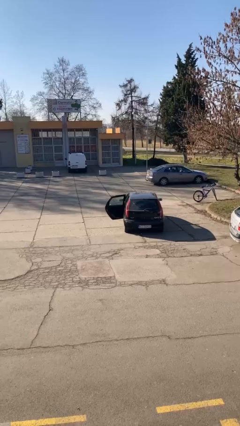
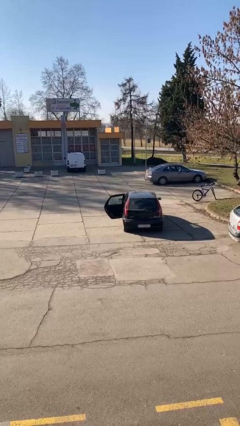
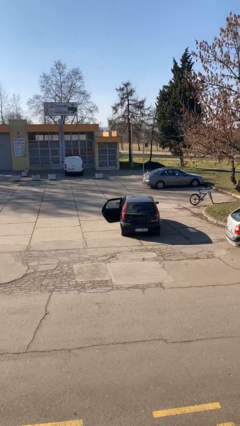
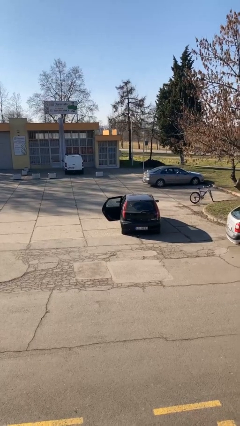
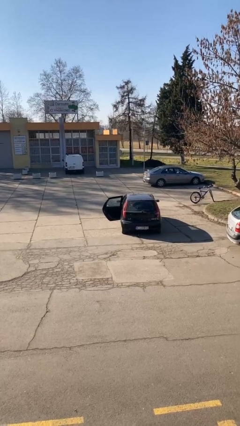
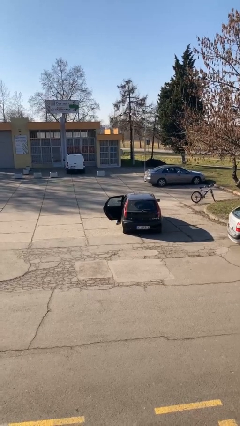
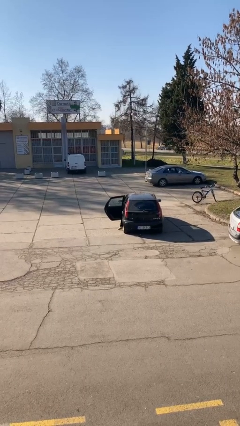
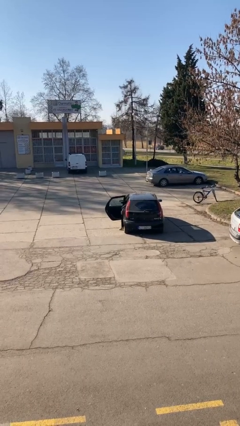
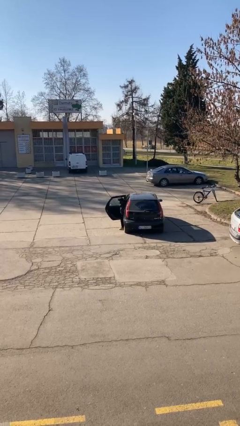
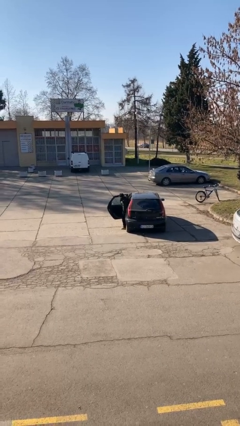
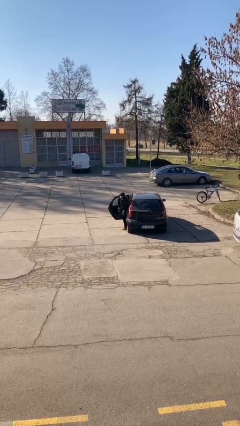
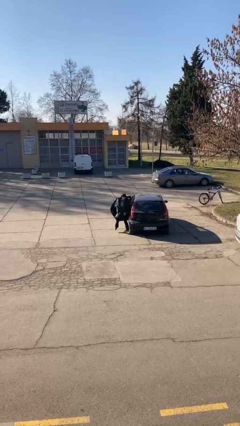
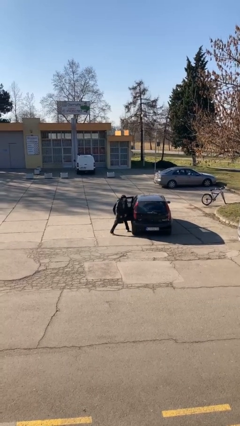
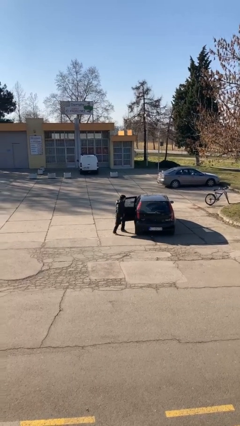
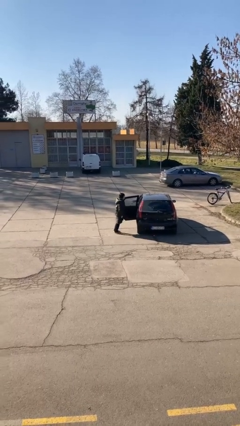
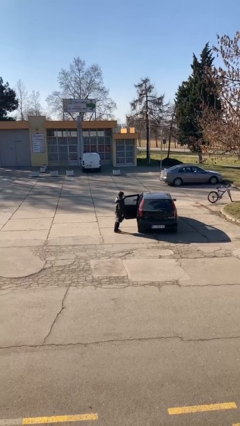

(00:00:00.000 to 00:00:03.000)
person exits car

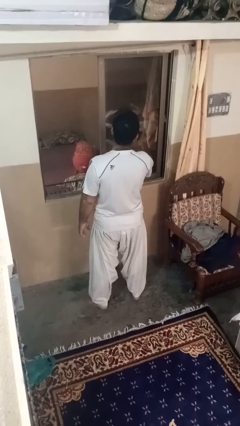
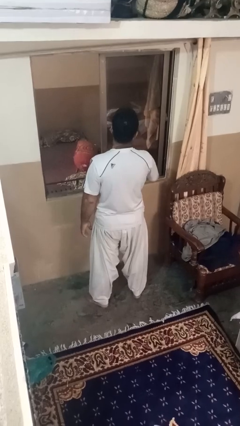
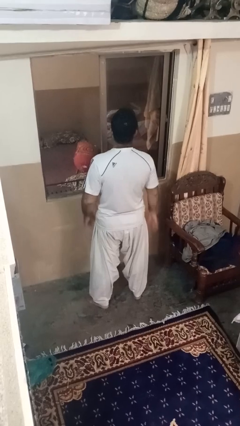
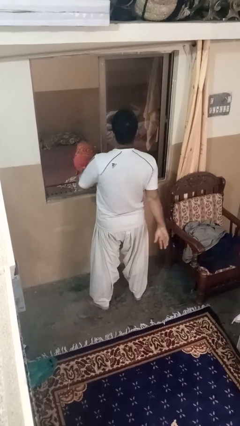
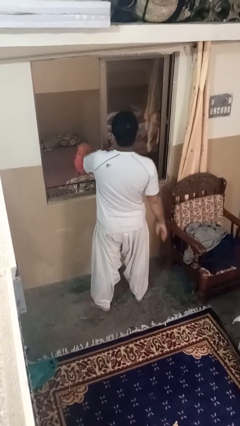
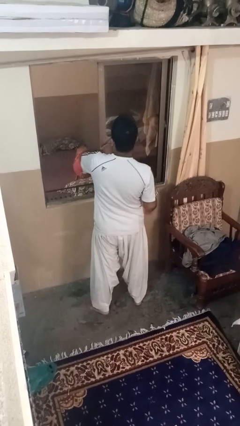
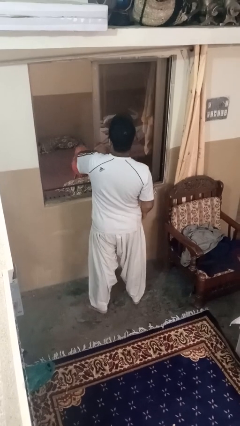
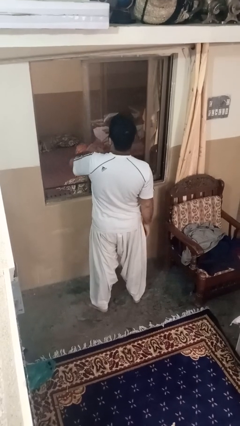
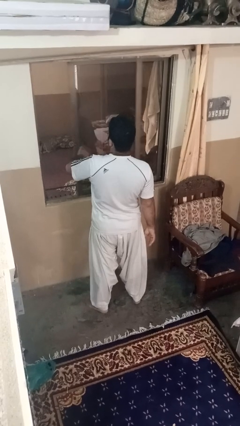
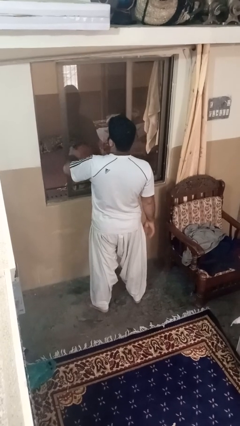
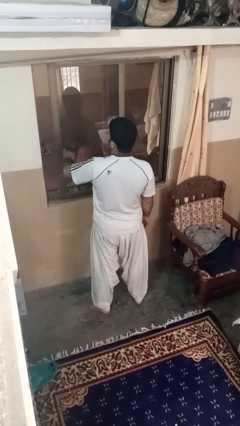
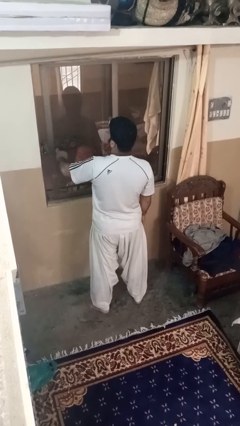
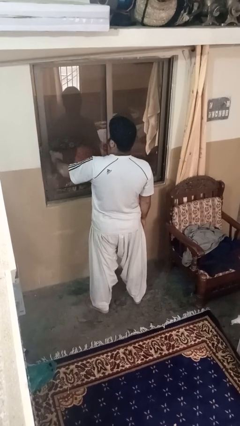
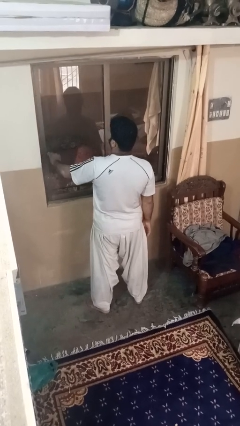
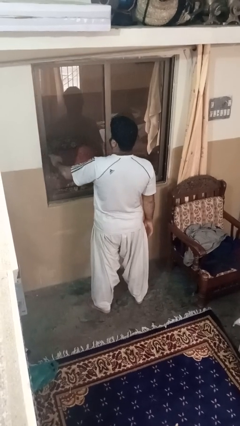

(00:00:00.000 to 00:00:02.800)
person closes home window

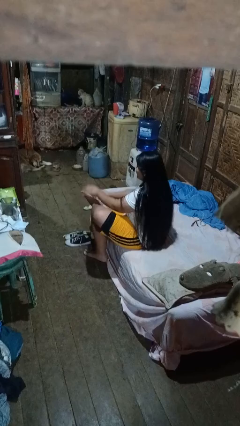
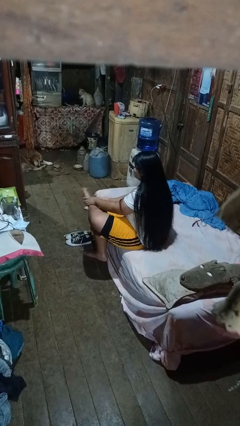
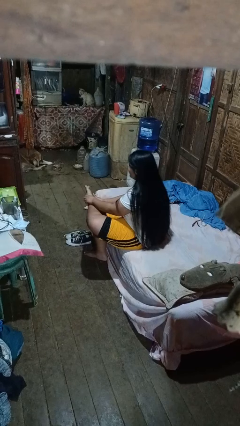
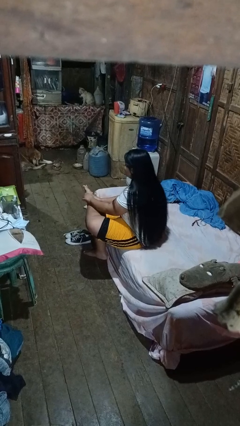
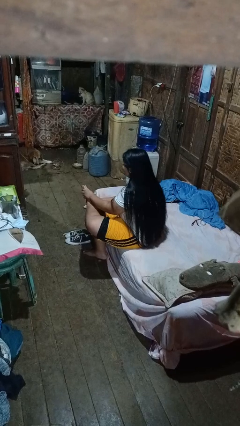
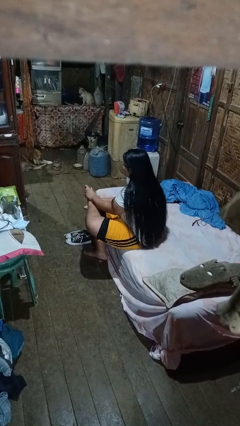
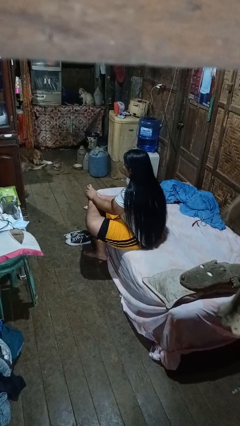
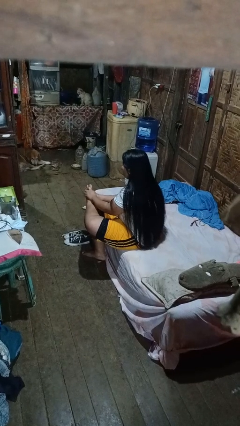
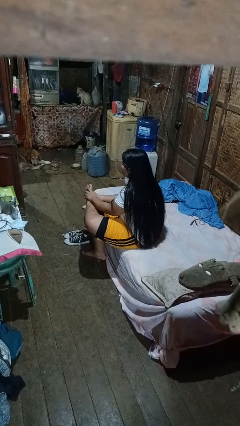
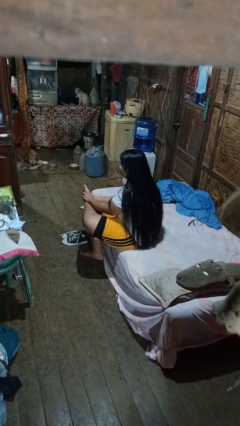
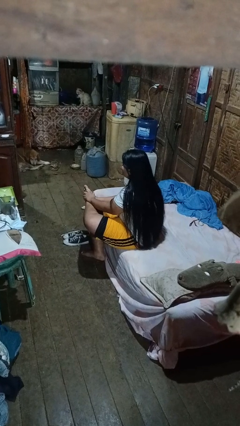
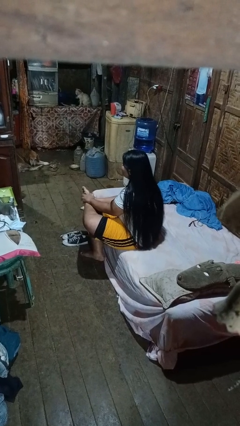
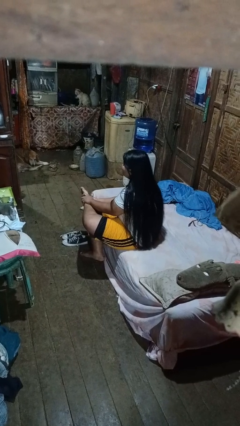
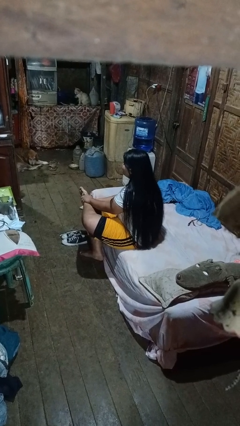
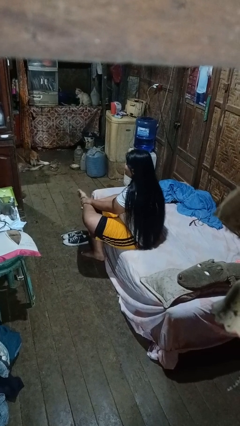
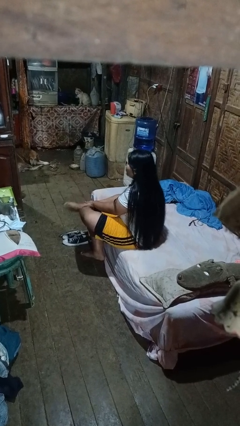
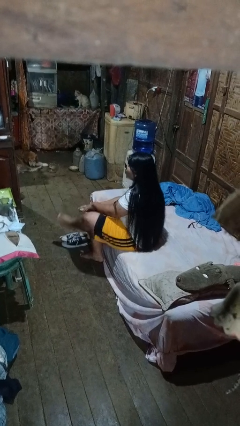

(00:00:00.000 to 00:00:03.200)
person rubs foot

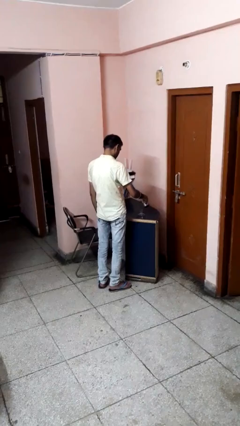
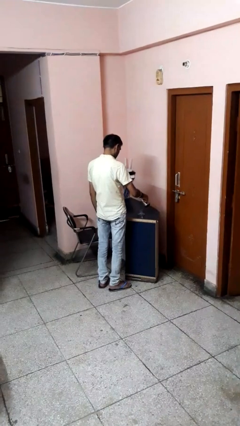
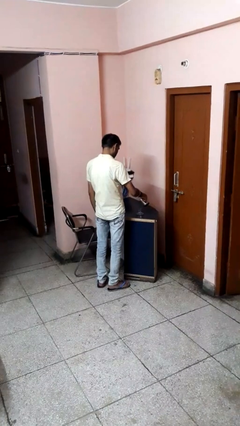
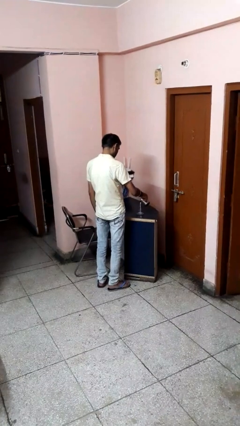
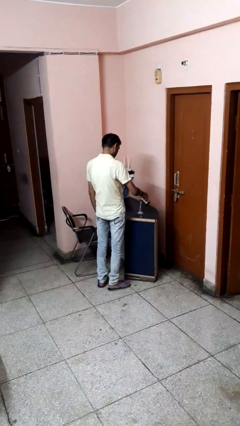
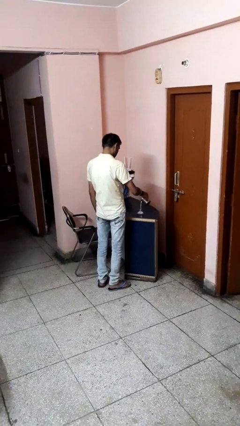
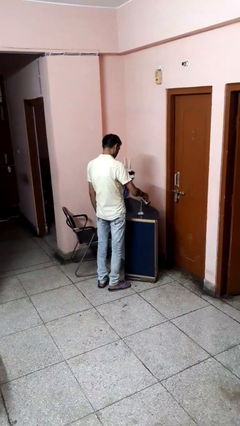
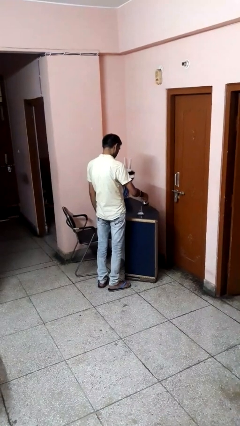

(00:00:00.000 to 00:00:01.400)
person pours into bowl

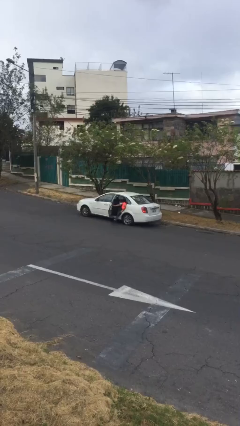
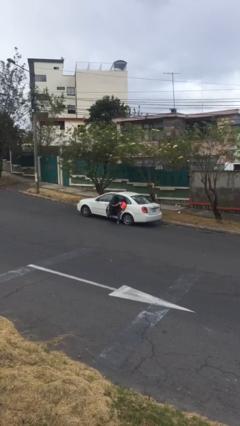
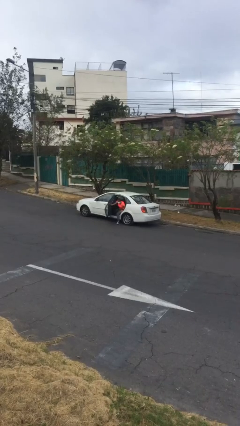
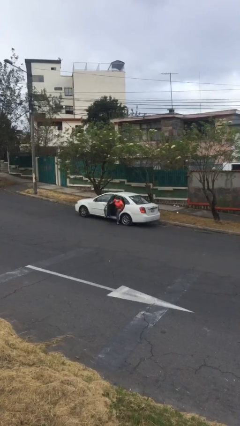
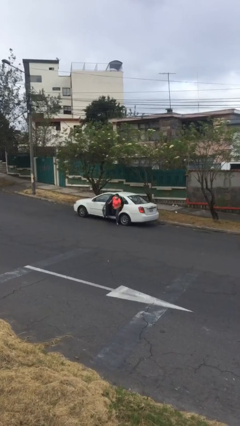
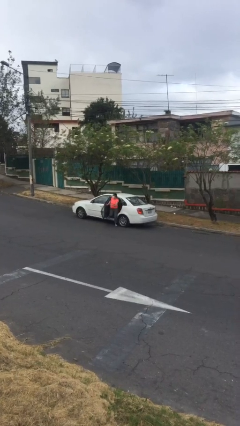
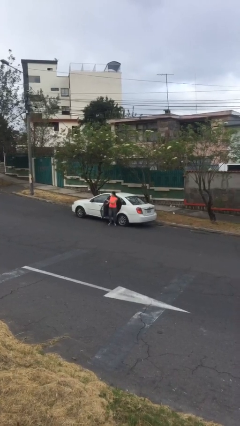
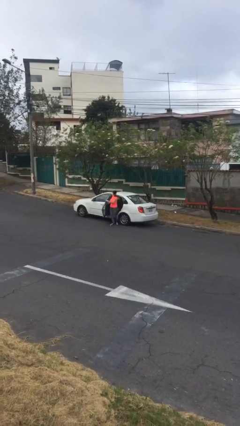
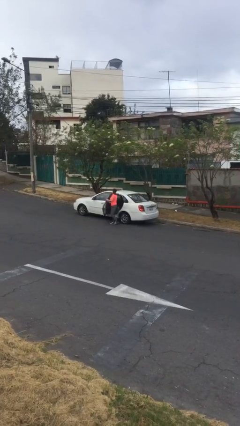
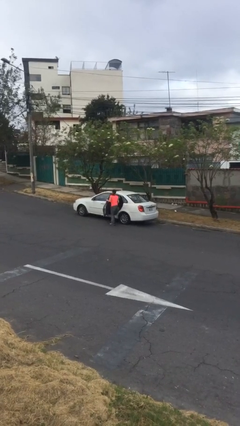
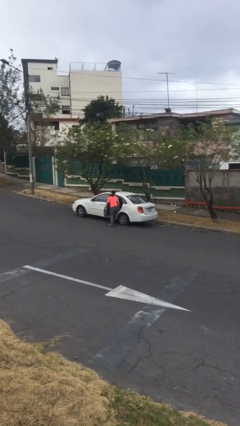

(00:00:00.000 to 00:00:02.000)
car drops off person

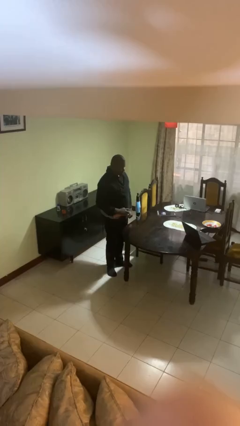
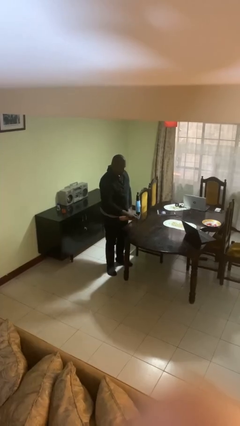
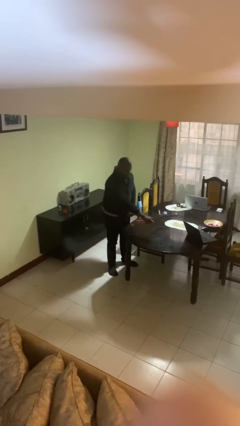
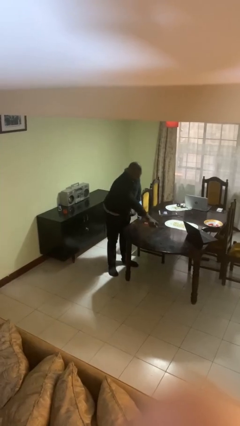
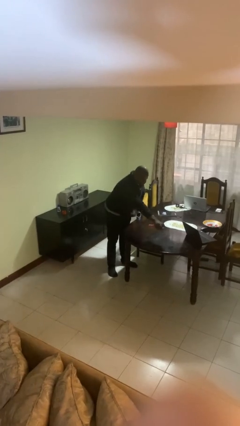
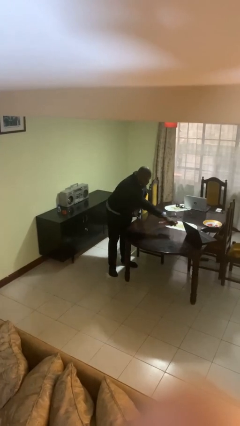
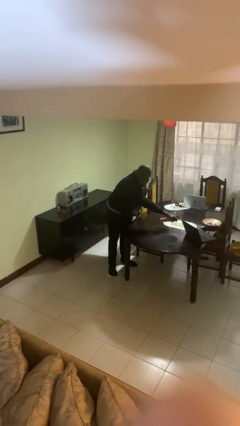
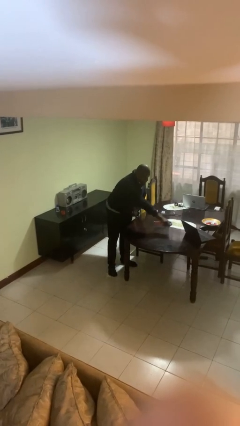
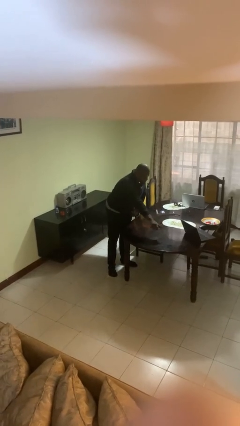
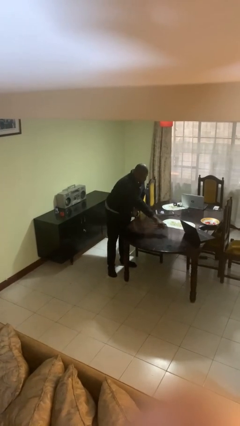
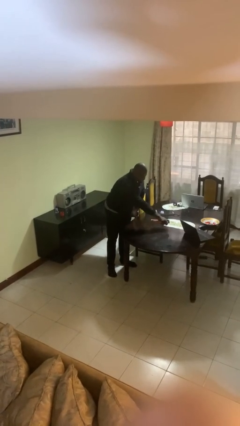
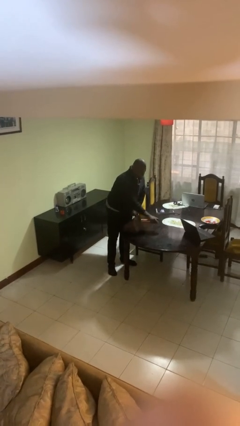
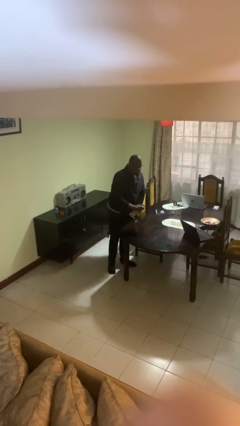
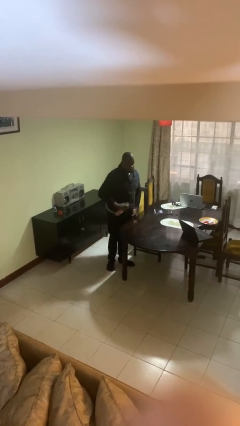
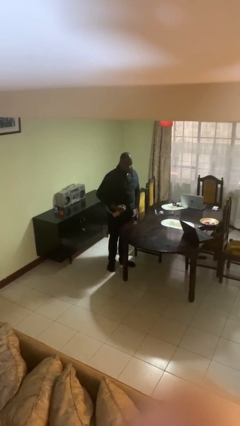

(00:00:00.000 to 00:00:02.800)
person sprays from bottle

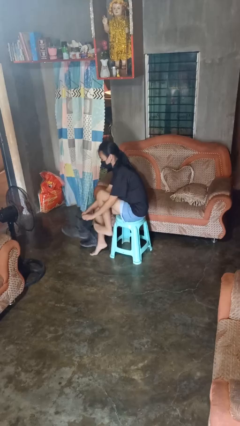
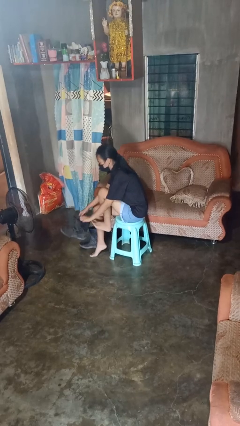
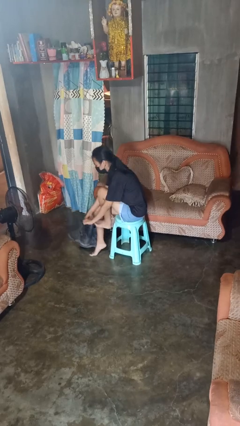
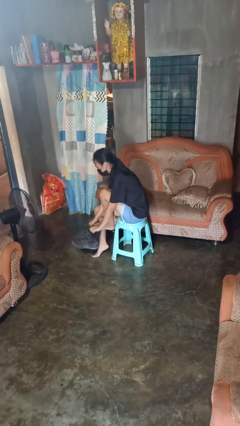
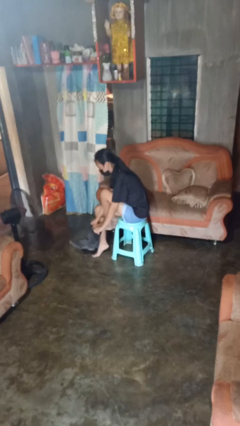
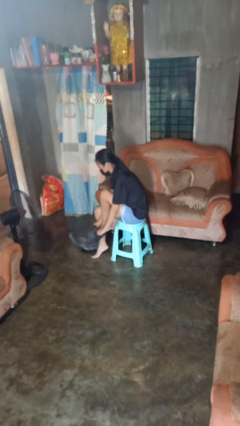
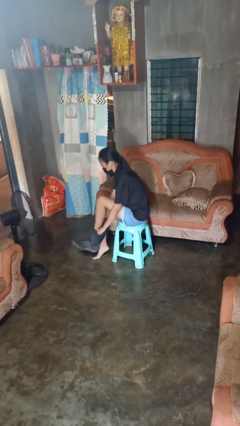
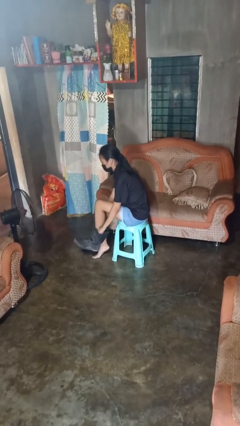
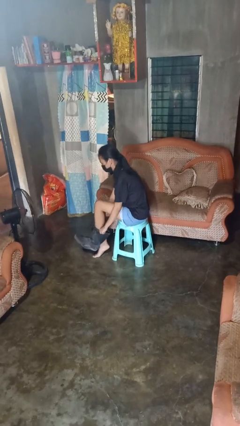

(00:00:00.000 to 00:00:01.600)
person puts on boots
